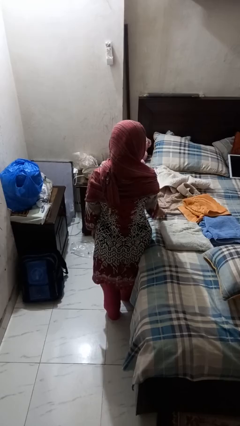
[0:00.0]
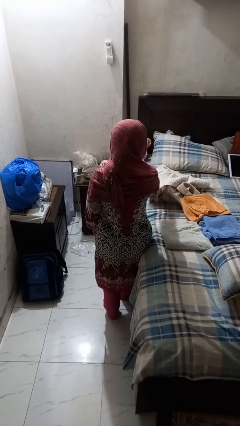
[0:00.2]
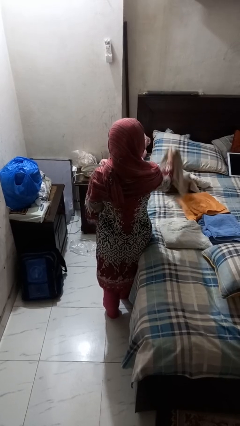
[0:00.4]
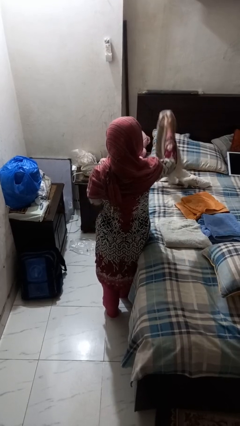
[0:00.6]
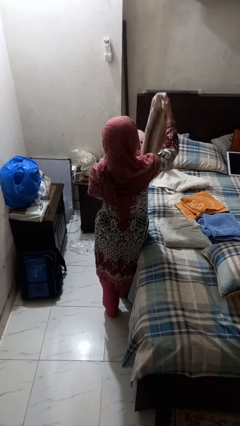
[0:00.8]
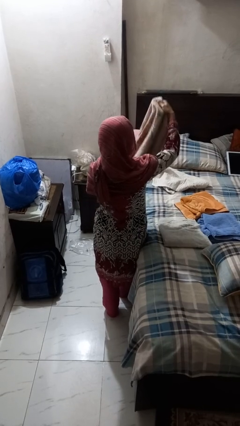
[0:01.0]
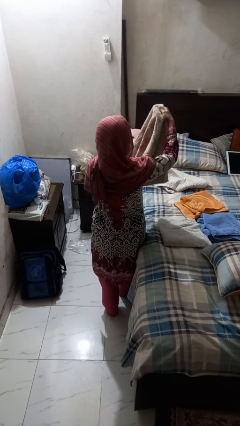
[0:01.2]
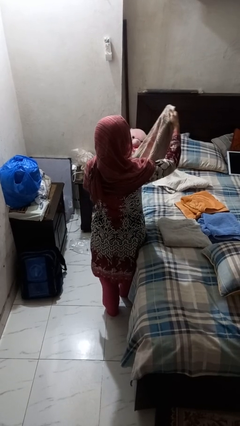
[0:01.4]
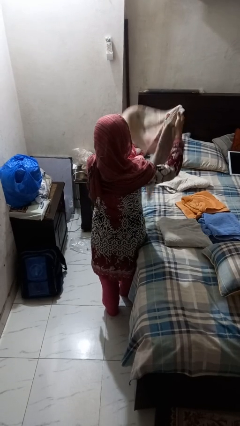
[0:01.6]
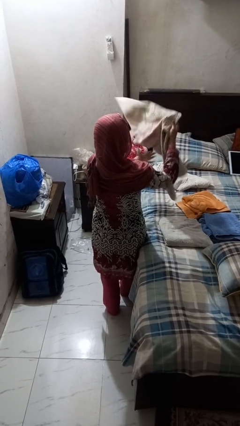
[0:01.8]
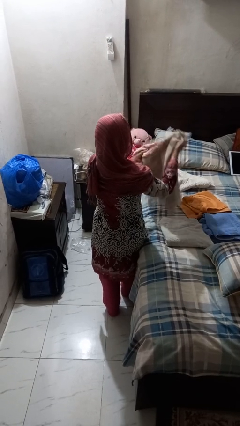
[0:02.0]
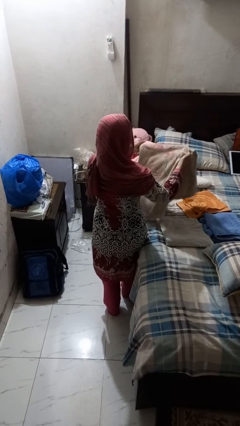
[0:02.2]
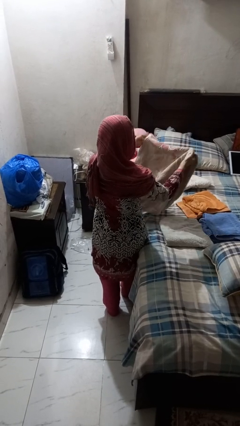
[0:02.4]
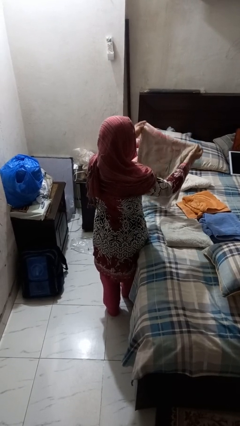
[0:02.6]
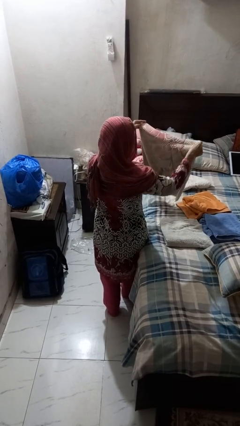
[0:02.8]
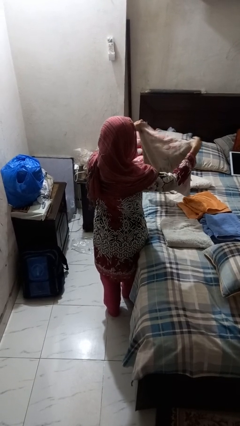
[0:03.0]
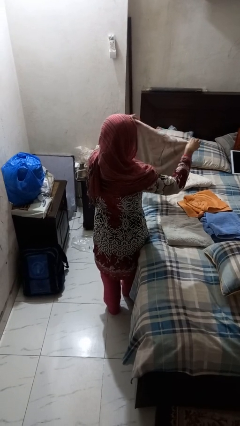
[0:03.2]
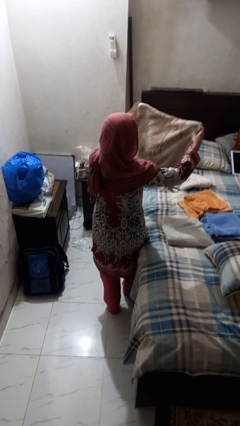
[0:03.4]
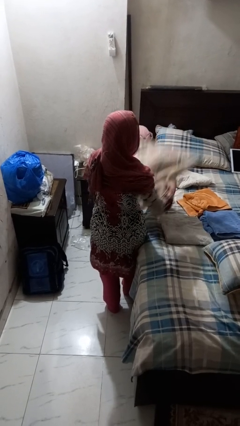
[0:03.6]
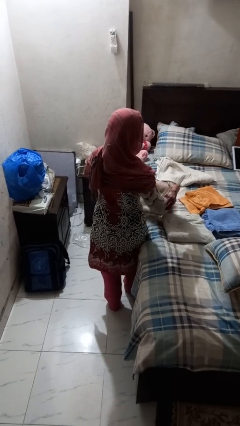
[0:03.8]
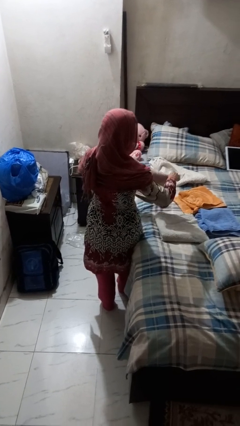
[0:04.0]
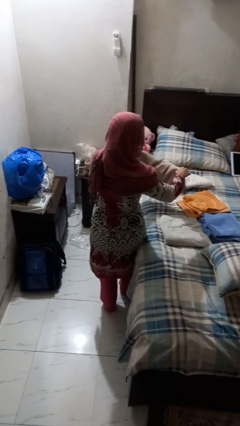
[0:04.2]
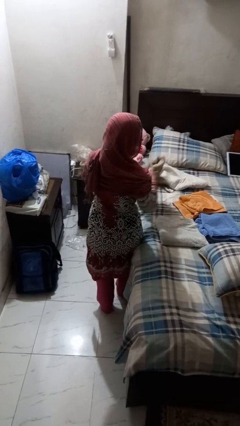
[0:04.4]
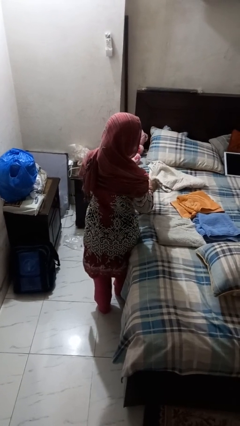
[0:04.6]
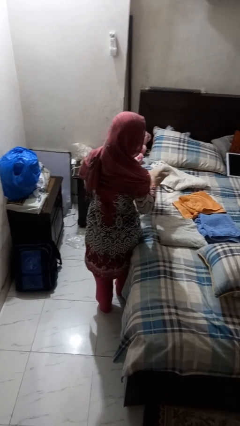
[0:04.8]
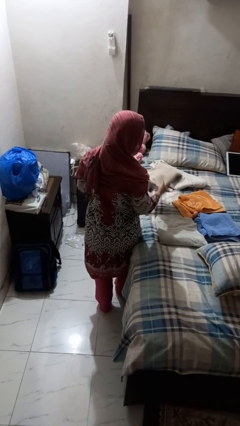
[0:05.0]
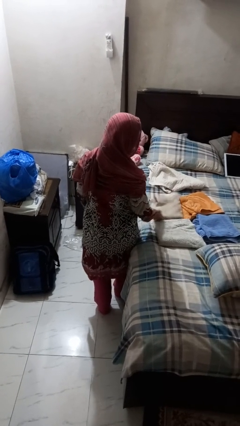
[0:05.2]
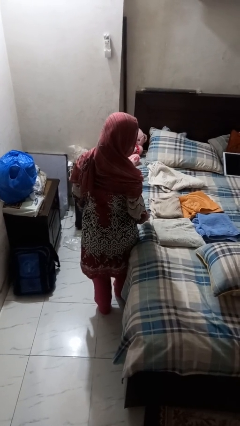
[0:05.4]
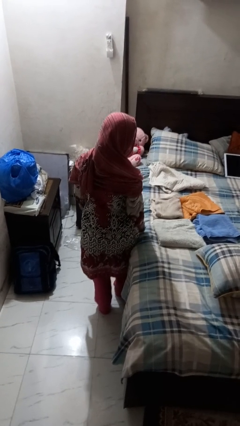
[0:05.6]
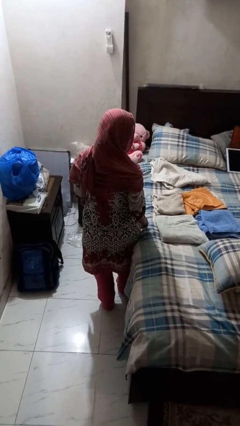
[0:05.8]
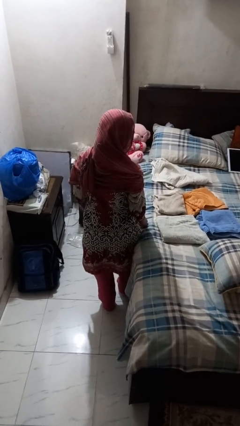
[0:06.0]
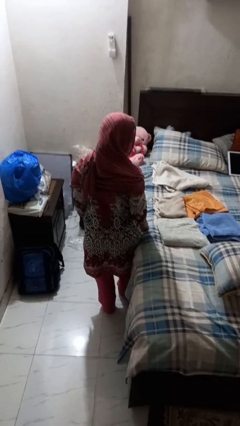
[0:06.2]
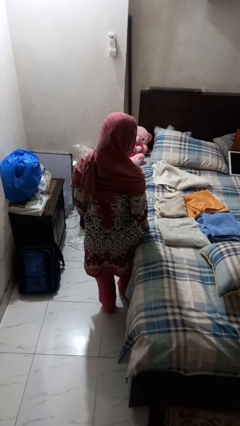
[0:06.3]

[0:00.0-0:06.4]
person folds towel

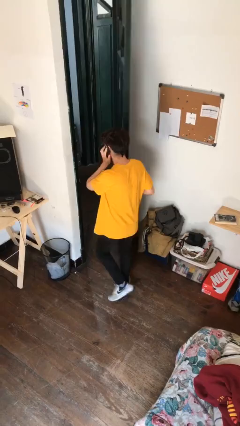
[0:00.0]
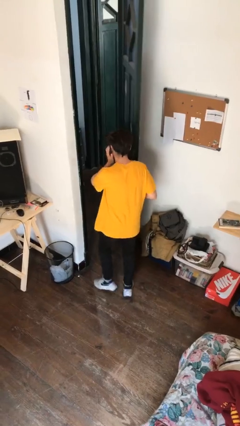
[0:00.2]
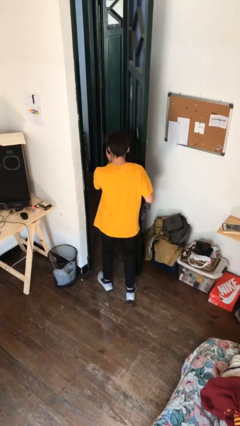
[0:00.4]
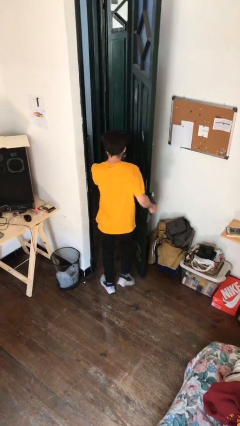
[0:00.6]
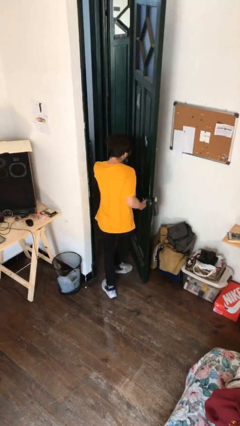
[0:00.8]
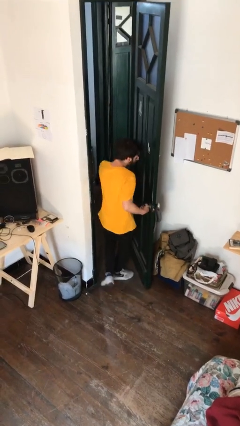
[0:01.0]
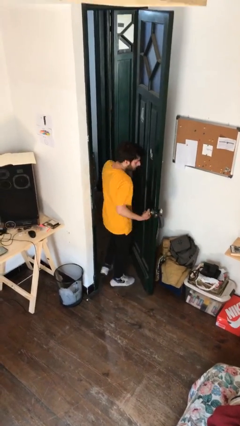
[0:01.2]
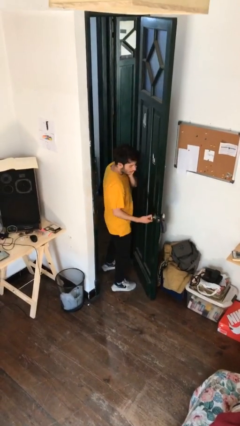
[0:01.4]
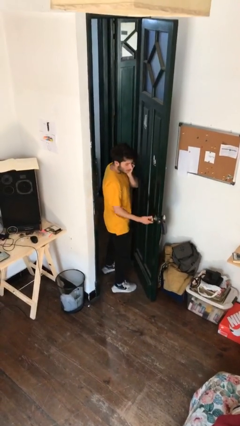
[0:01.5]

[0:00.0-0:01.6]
person exits scene through structure

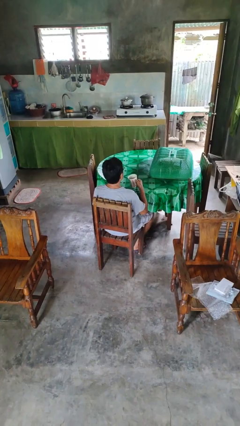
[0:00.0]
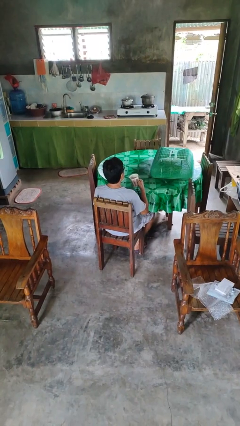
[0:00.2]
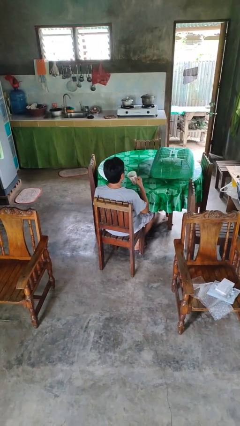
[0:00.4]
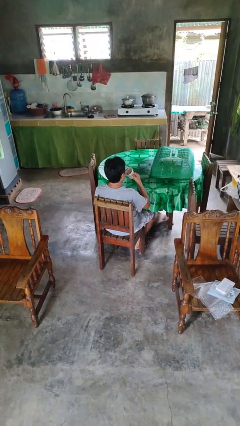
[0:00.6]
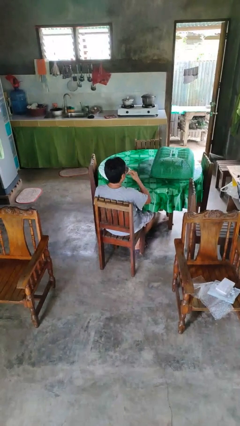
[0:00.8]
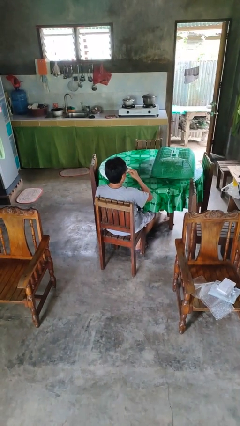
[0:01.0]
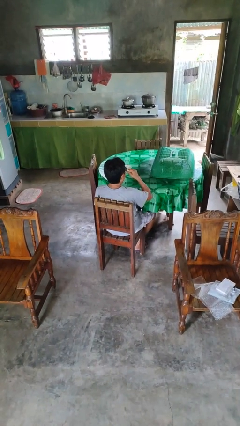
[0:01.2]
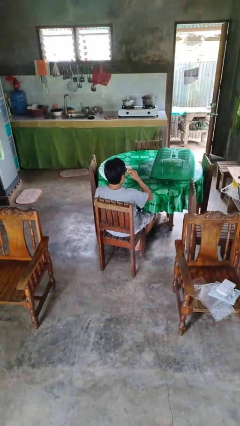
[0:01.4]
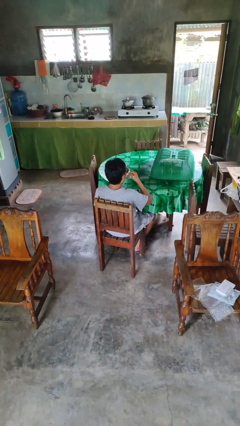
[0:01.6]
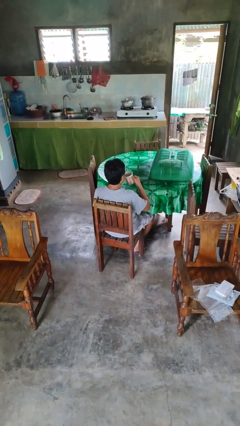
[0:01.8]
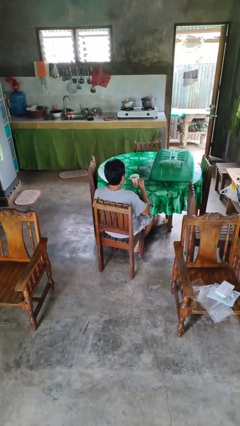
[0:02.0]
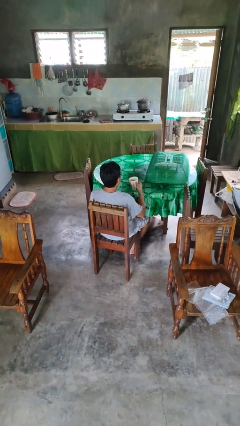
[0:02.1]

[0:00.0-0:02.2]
person drinks from mug

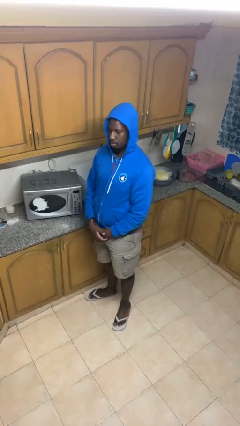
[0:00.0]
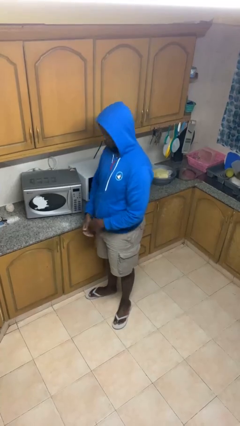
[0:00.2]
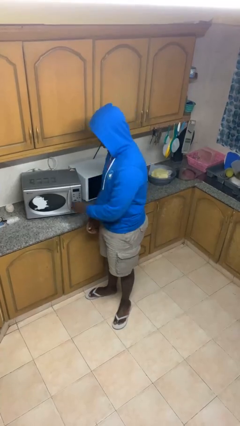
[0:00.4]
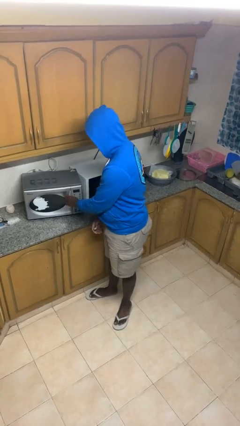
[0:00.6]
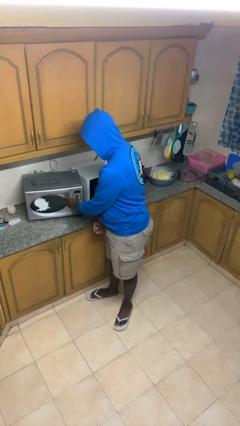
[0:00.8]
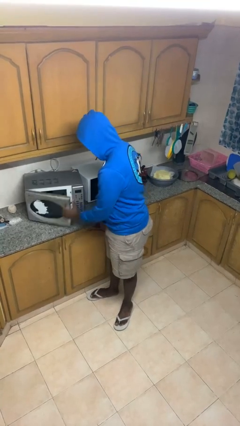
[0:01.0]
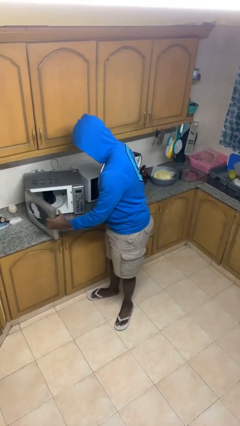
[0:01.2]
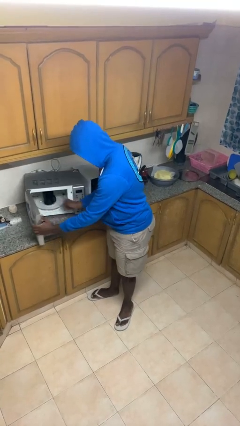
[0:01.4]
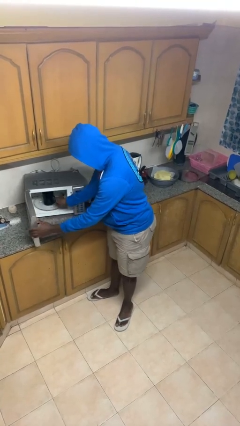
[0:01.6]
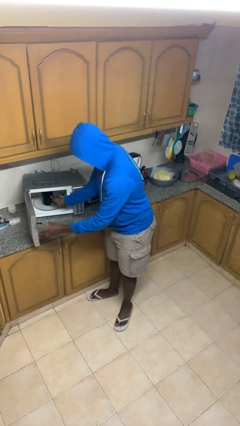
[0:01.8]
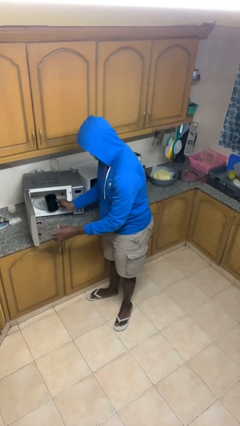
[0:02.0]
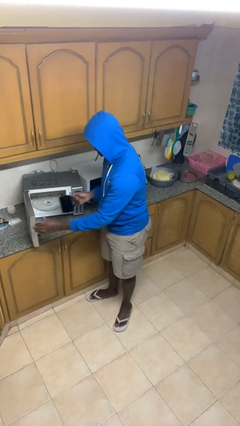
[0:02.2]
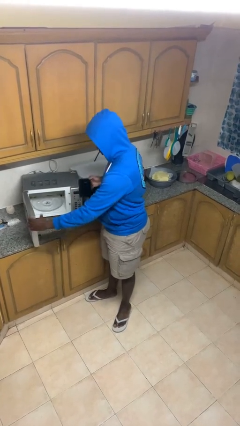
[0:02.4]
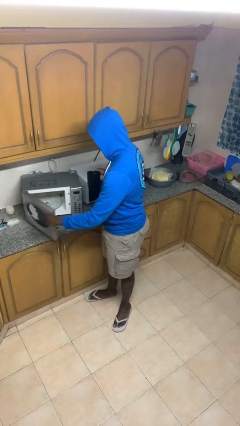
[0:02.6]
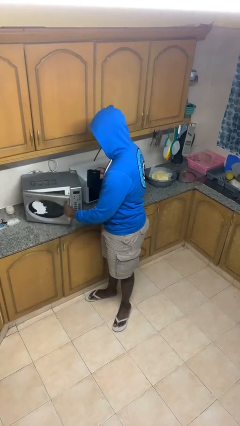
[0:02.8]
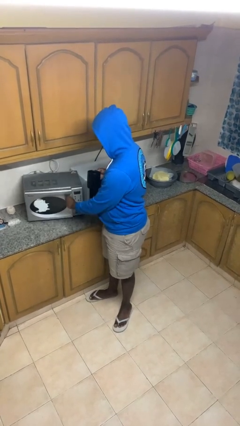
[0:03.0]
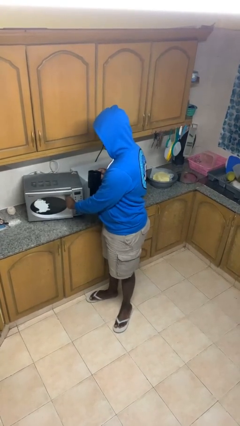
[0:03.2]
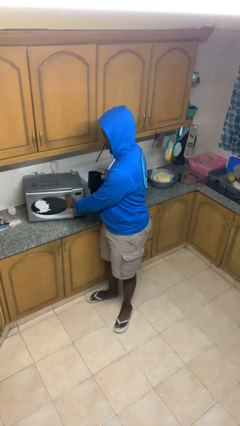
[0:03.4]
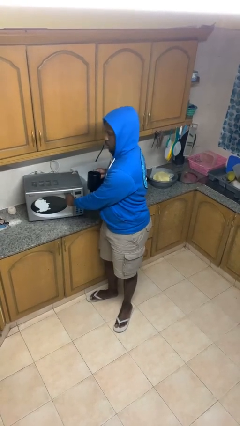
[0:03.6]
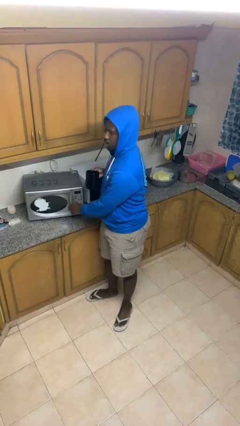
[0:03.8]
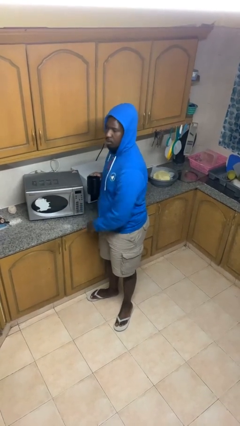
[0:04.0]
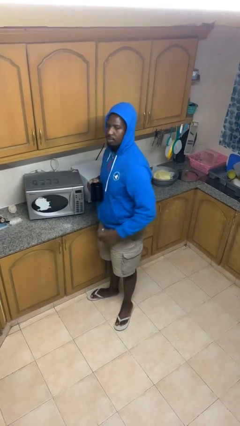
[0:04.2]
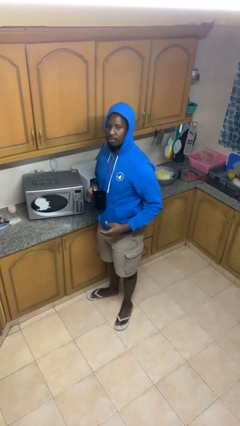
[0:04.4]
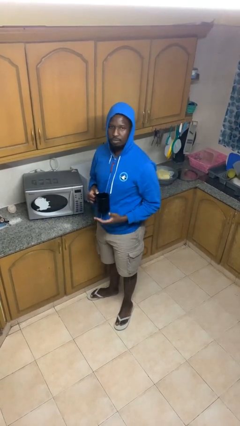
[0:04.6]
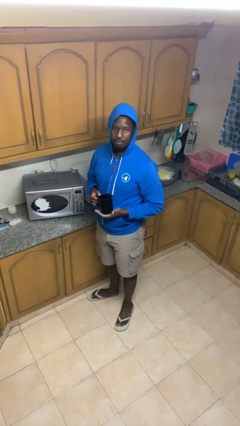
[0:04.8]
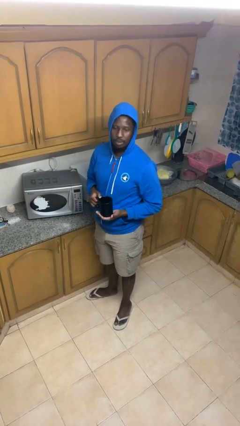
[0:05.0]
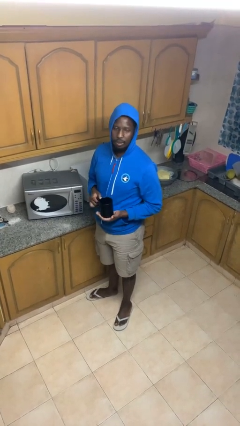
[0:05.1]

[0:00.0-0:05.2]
person takes object from microwave

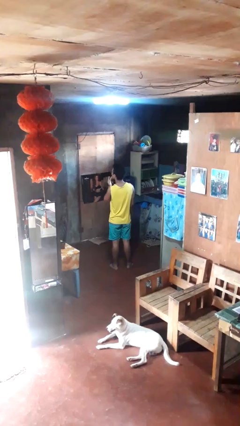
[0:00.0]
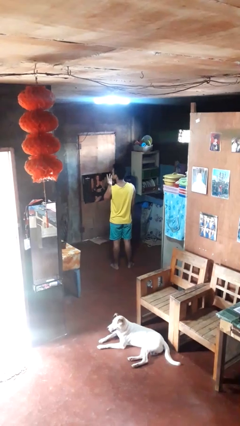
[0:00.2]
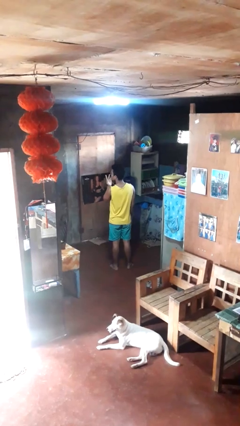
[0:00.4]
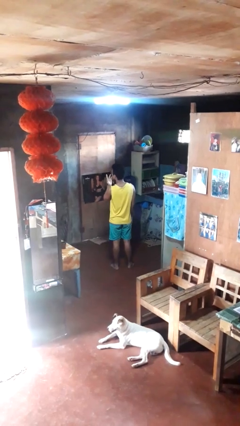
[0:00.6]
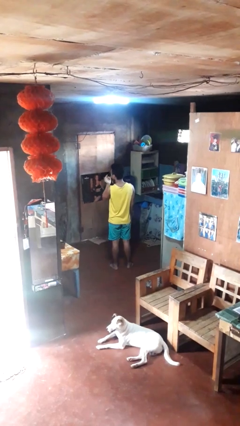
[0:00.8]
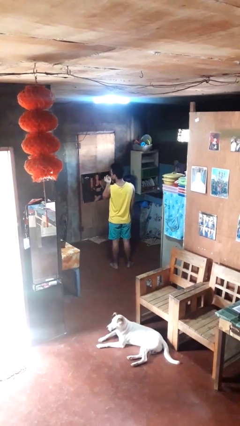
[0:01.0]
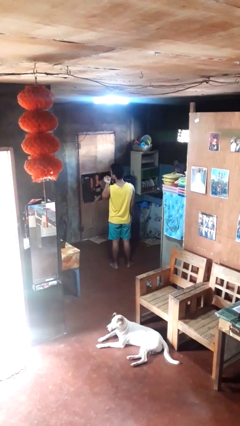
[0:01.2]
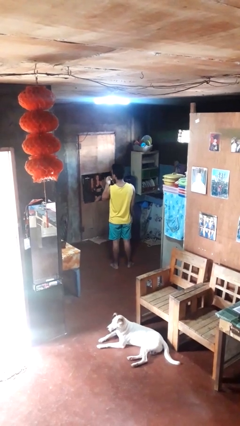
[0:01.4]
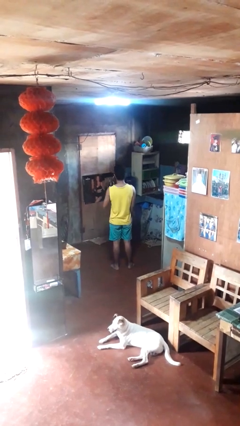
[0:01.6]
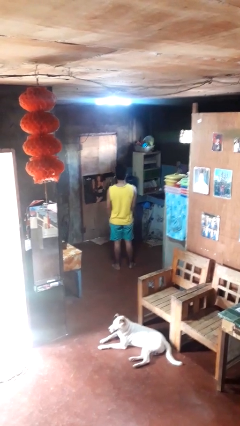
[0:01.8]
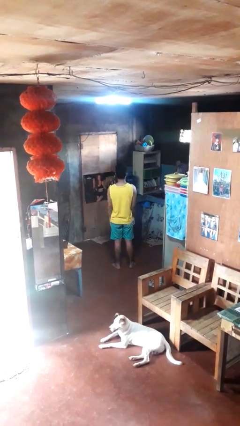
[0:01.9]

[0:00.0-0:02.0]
person licks fingers

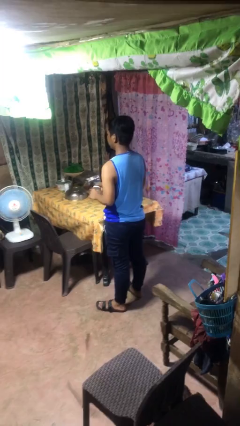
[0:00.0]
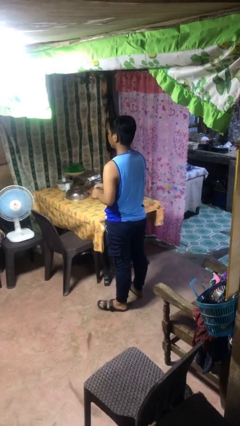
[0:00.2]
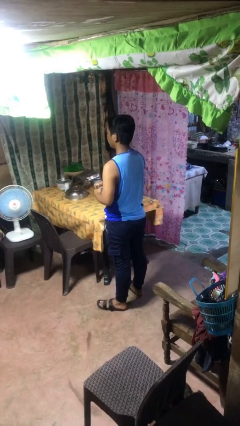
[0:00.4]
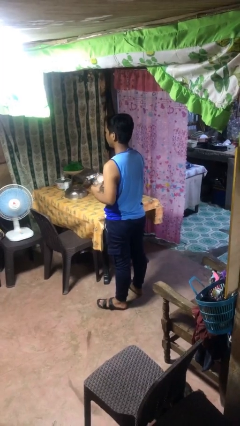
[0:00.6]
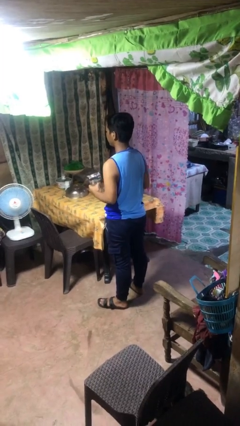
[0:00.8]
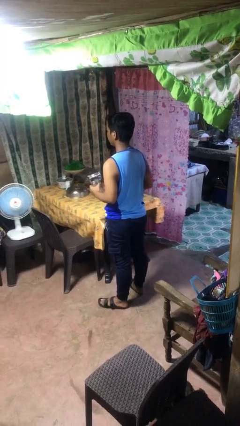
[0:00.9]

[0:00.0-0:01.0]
person opens jar
